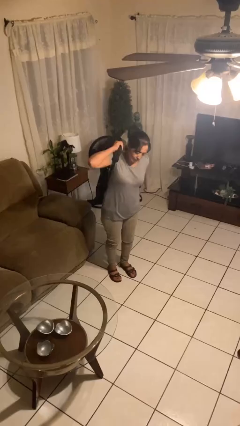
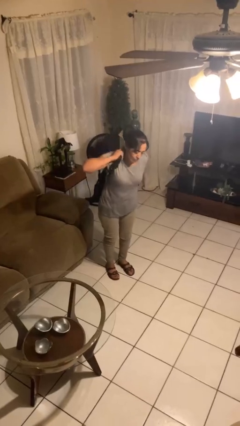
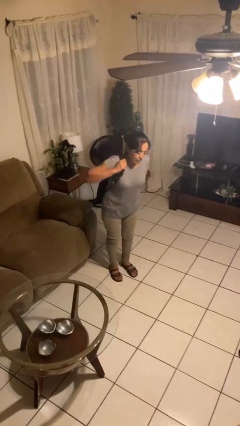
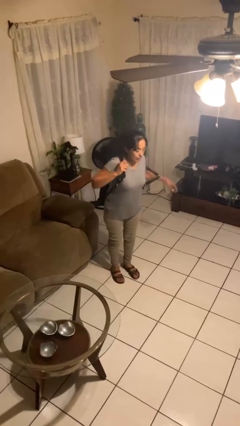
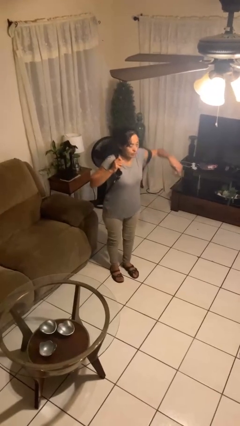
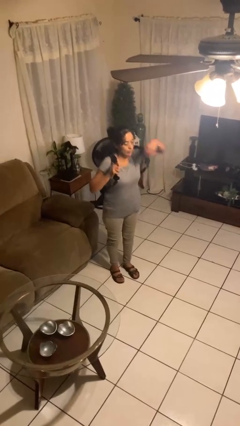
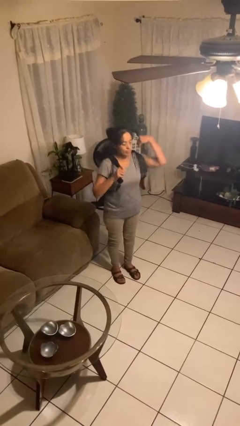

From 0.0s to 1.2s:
person puts on backpack

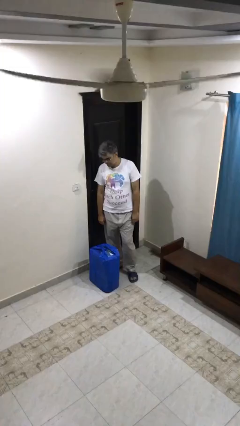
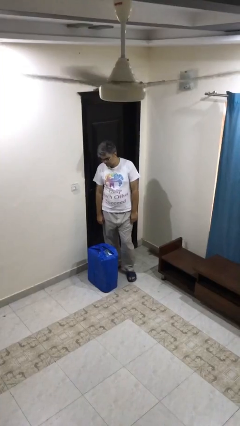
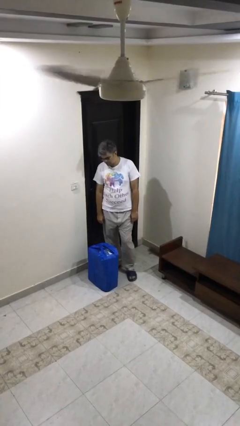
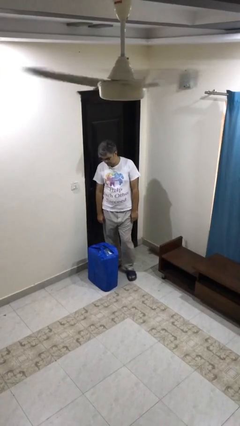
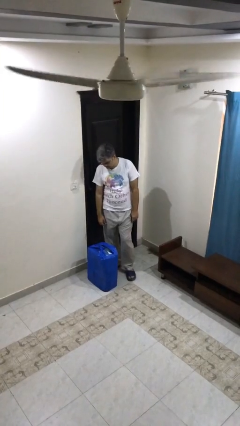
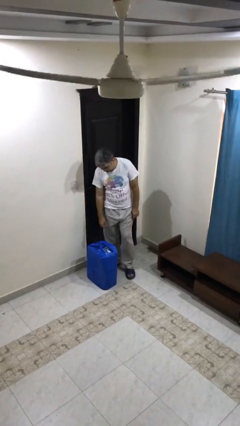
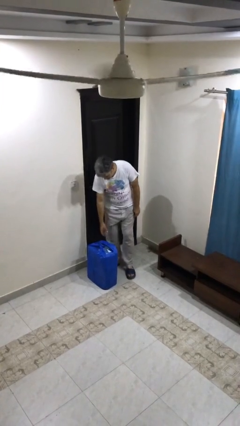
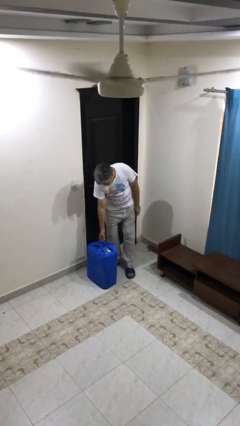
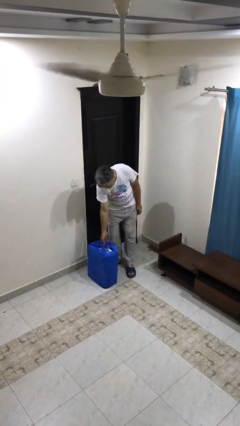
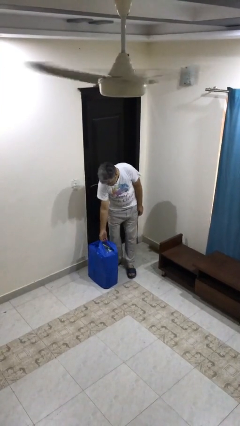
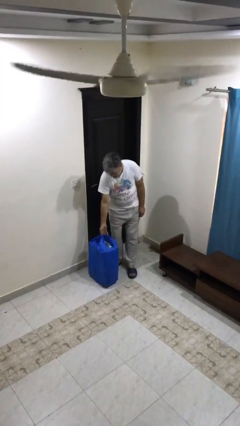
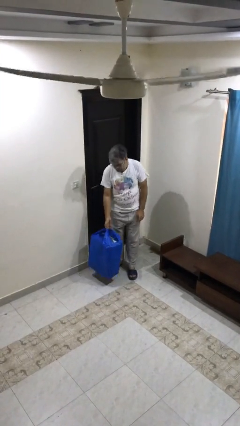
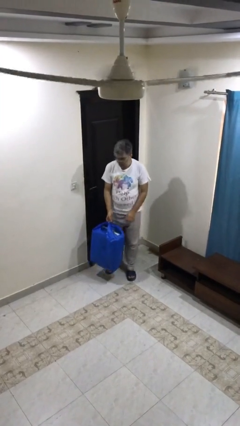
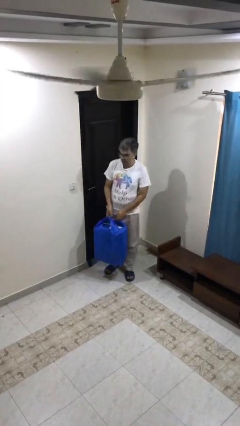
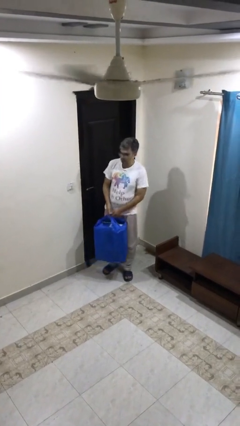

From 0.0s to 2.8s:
person picks up object from floor

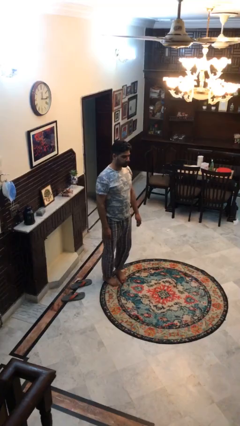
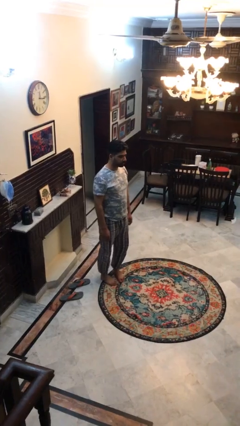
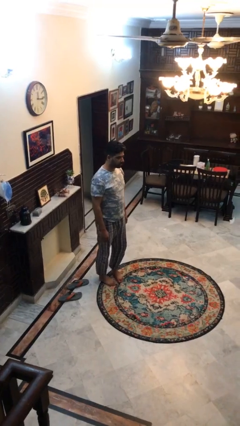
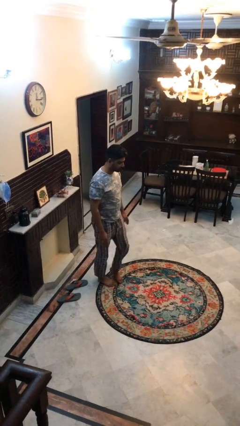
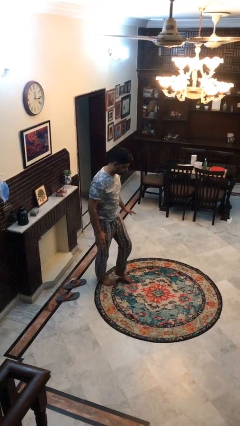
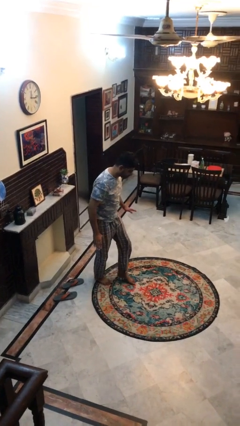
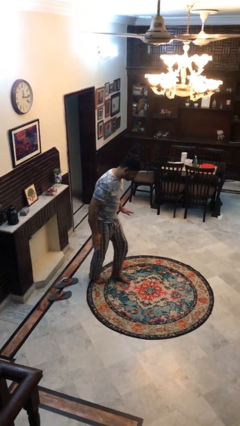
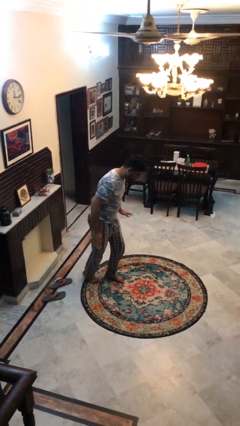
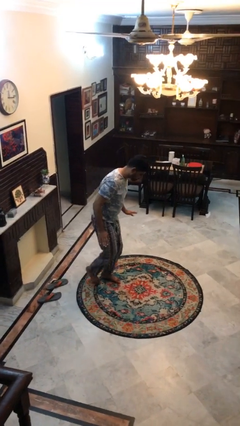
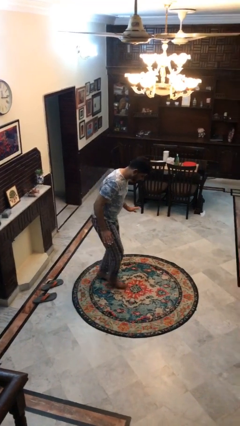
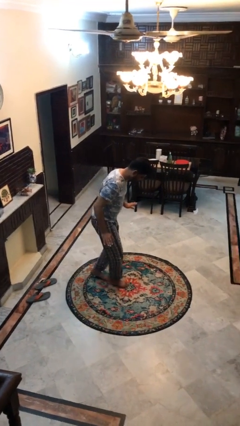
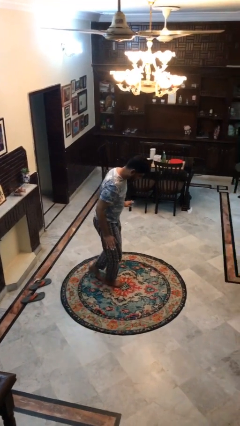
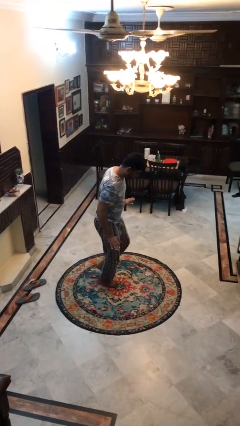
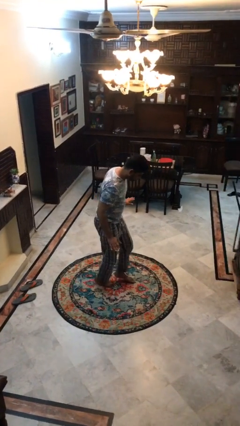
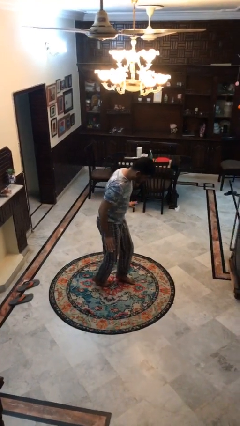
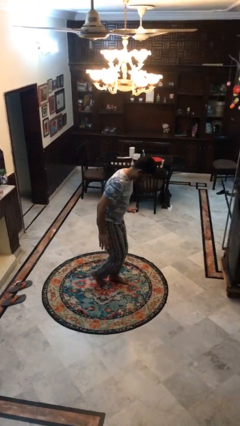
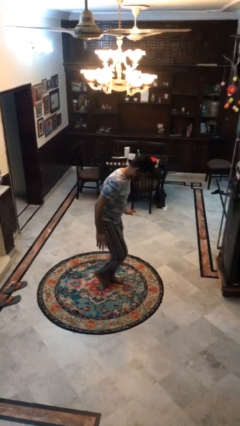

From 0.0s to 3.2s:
person walks tiptoe

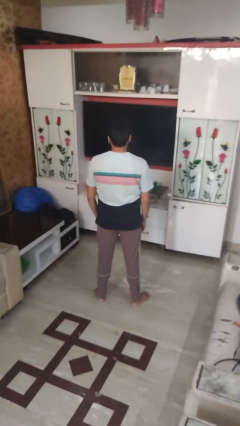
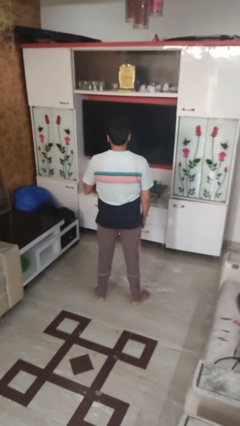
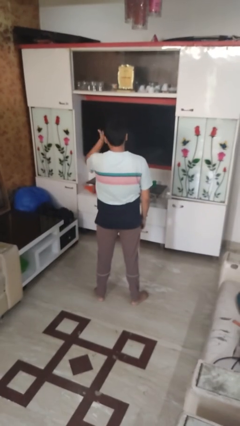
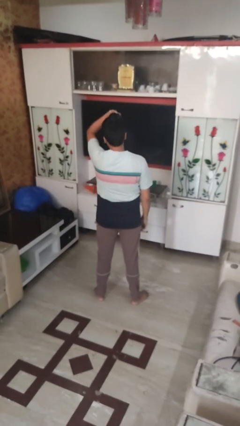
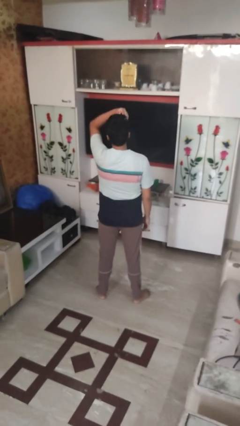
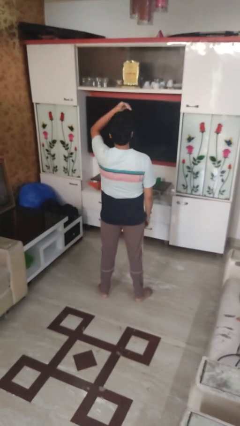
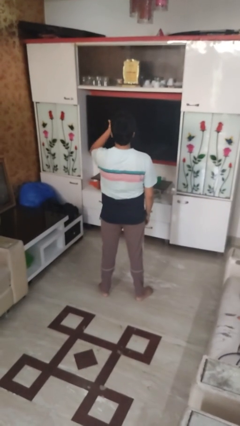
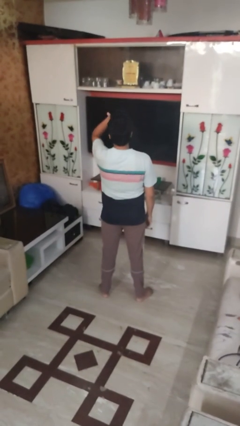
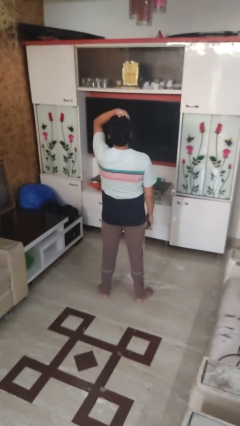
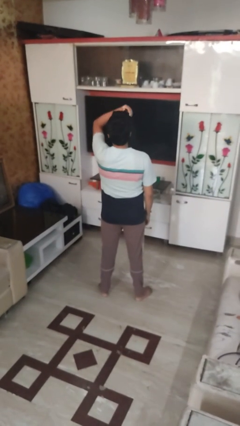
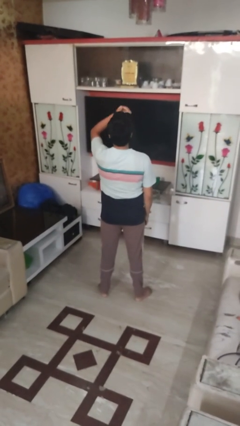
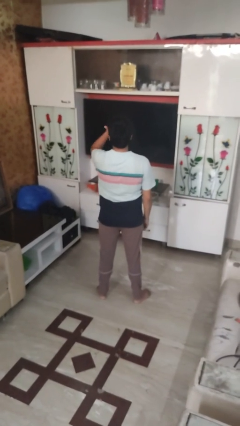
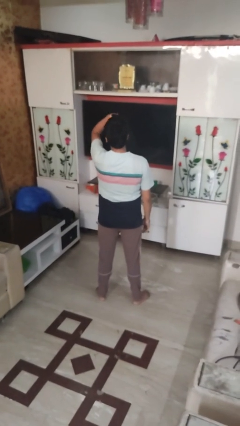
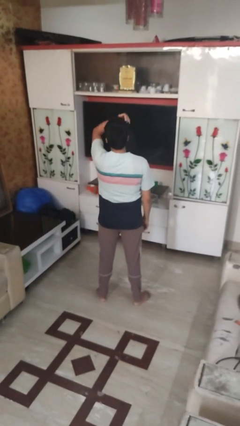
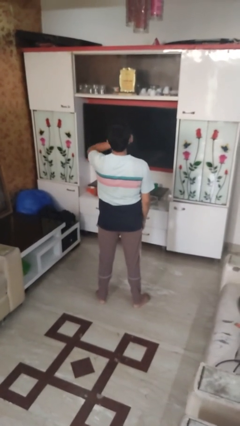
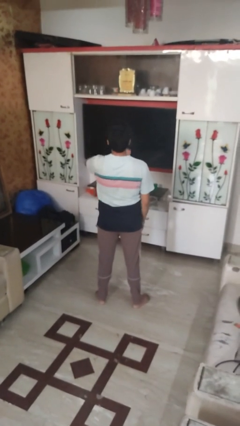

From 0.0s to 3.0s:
person strokes hair

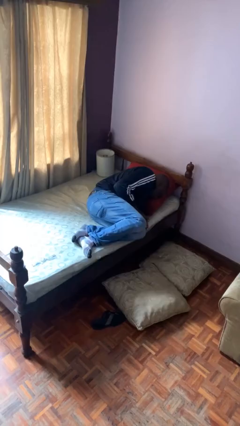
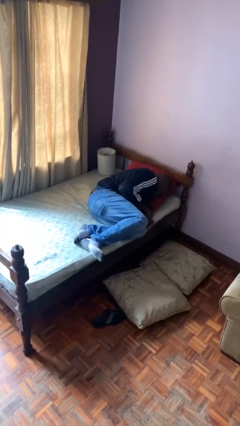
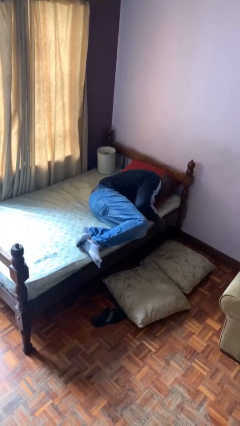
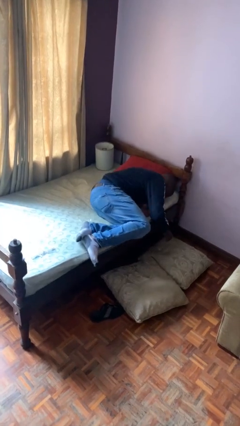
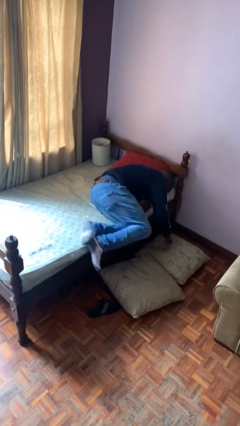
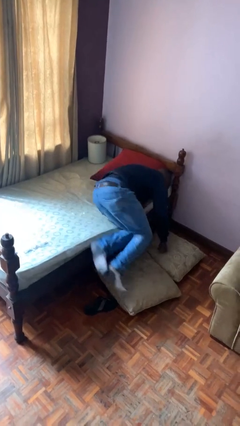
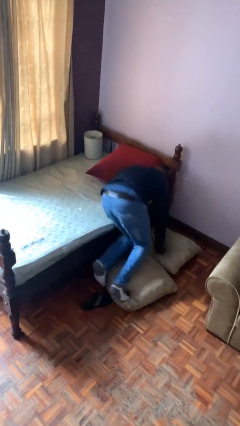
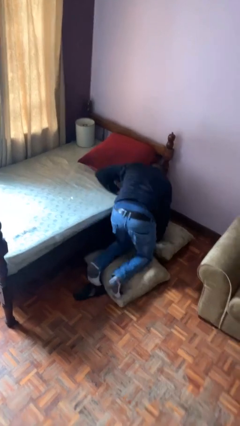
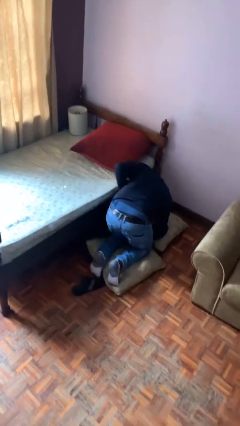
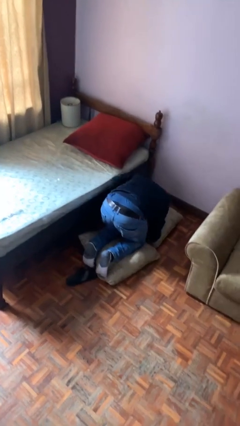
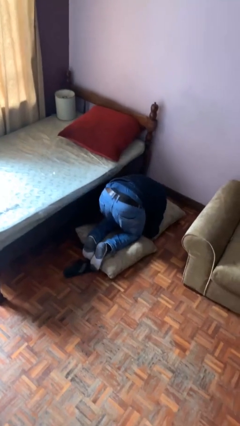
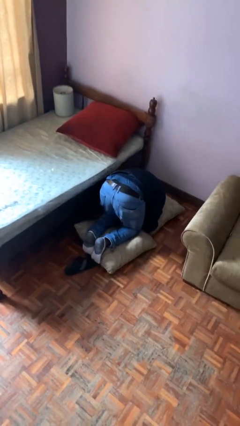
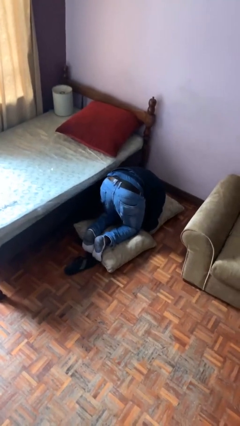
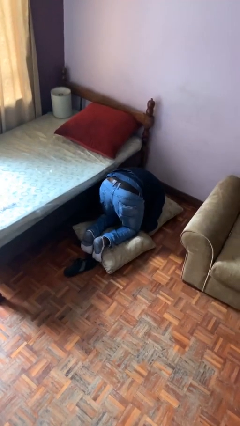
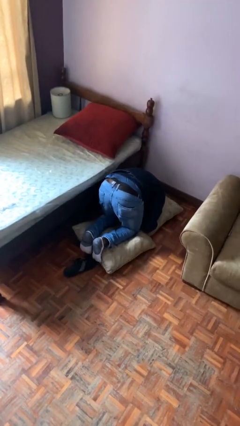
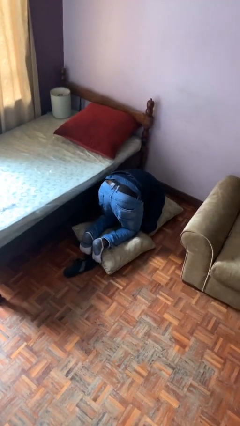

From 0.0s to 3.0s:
person falls from bed

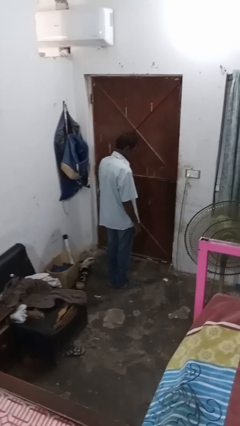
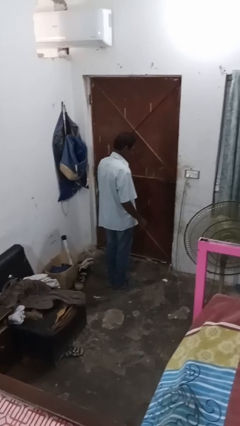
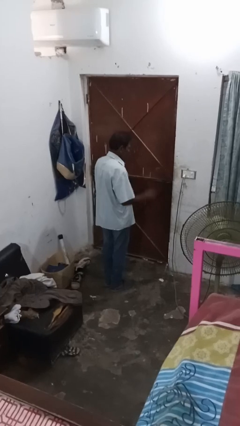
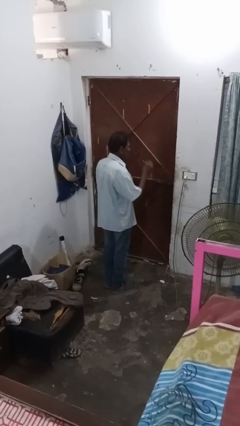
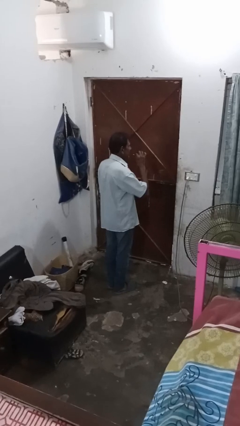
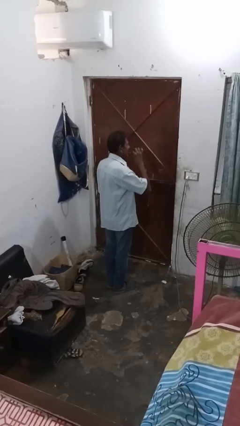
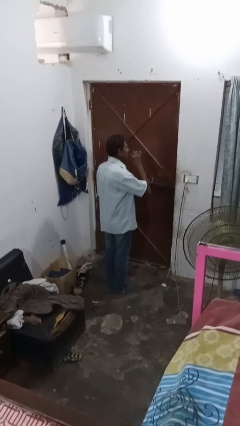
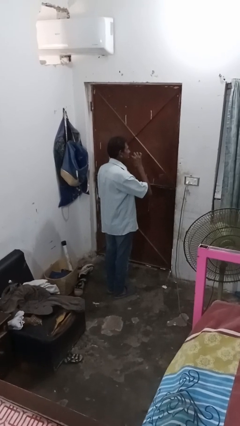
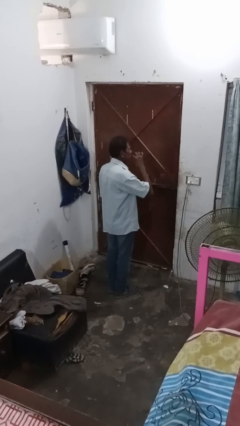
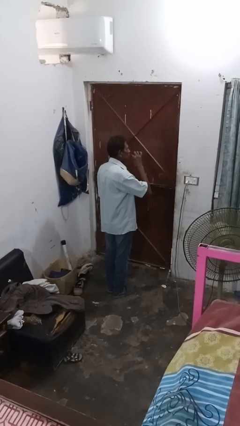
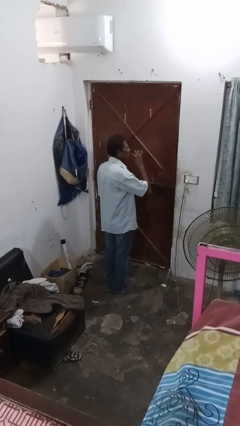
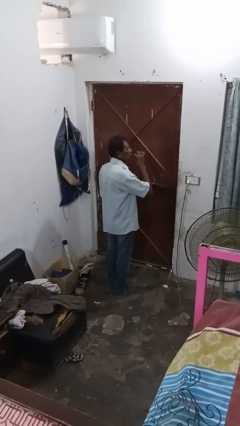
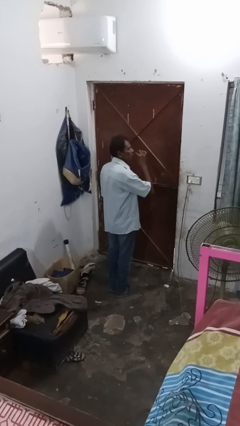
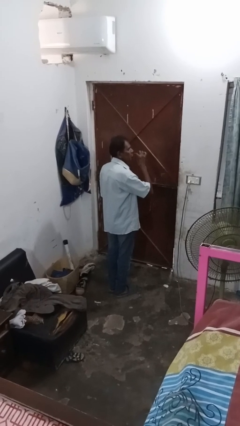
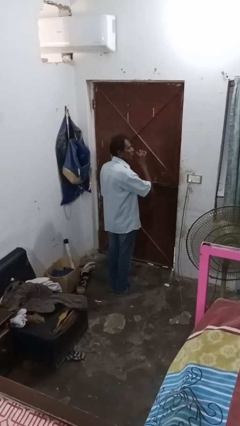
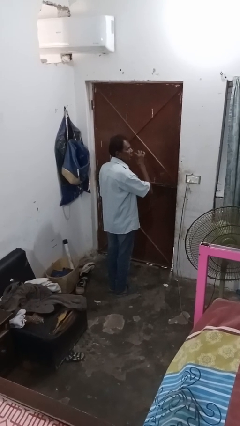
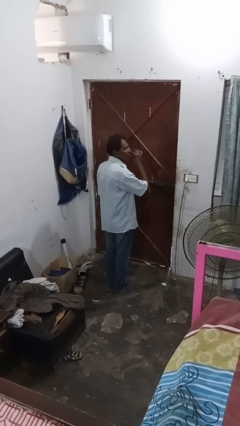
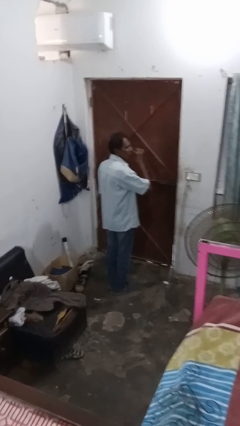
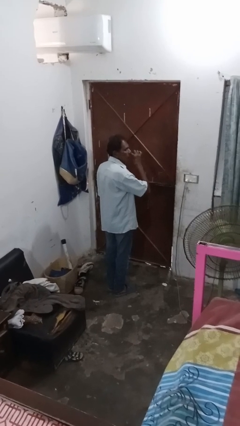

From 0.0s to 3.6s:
person flosses

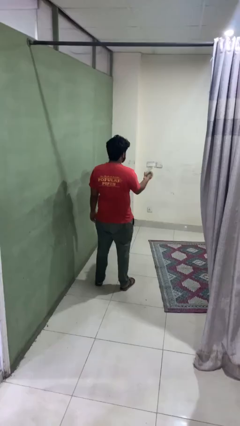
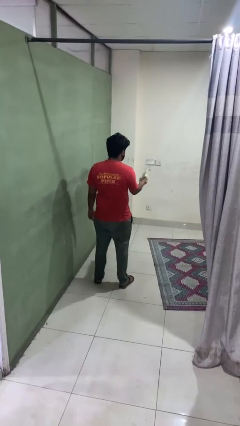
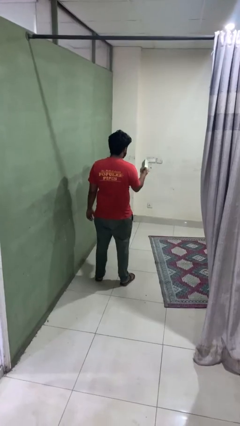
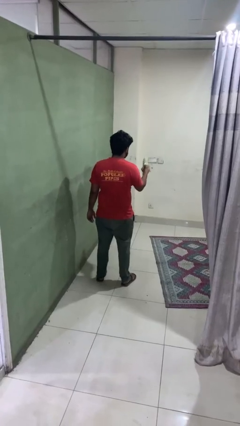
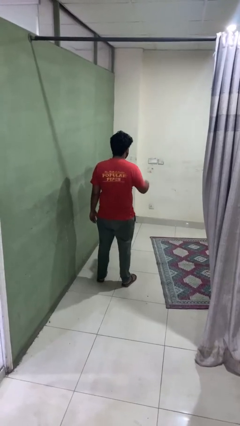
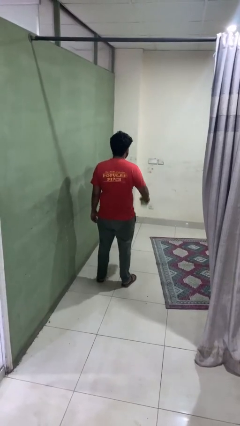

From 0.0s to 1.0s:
person catches dropped object
